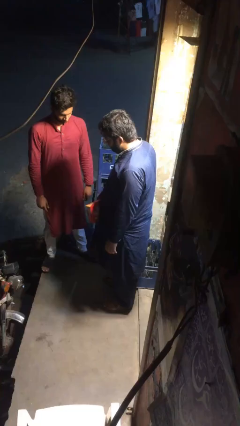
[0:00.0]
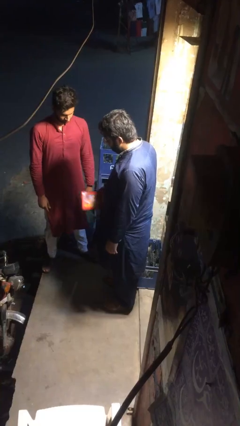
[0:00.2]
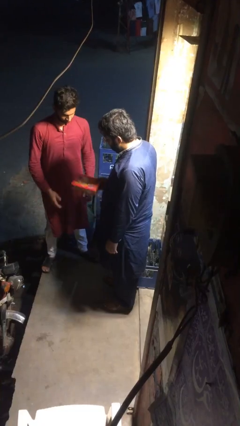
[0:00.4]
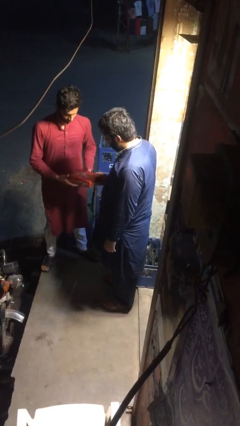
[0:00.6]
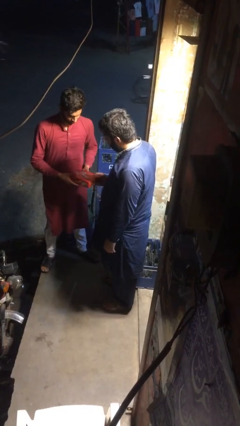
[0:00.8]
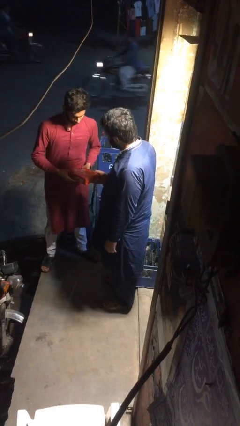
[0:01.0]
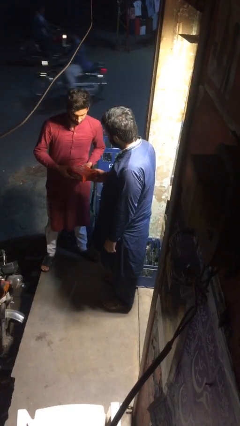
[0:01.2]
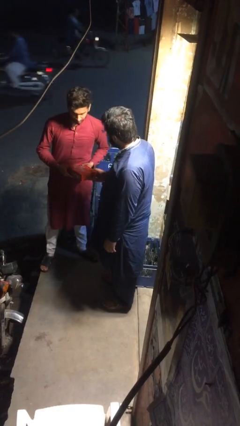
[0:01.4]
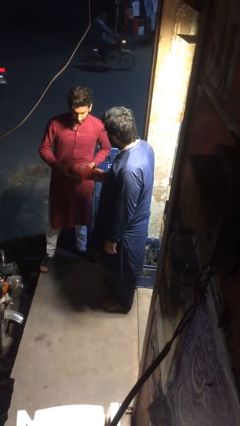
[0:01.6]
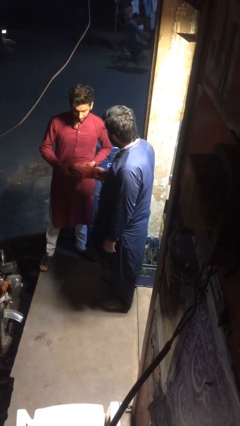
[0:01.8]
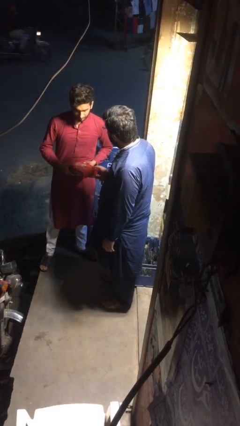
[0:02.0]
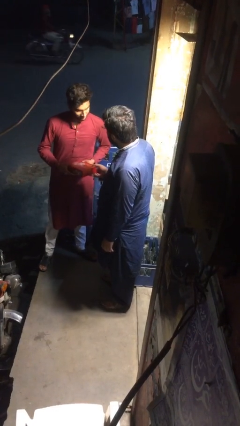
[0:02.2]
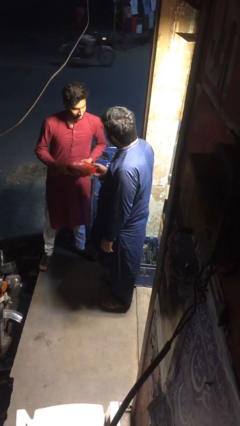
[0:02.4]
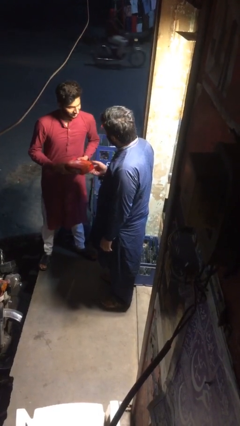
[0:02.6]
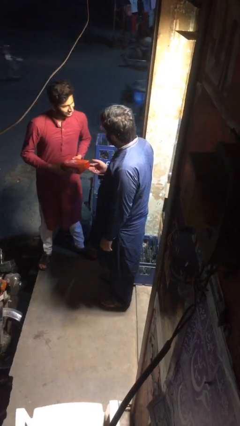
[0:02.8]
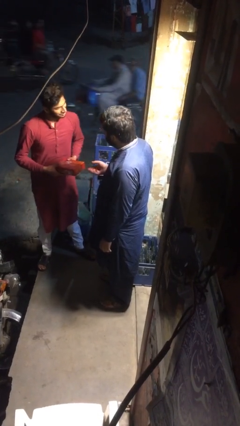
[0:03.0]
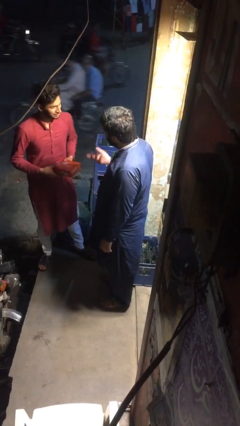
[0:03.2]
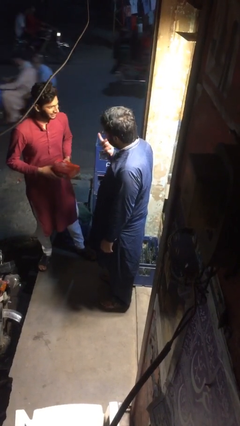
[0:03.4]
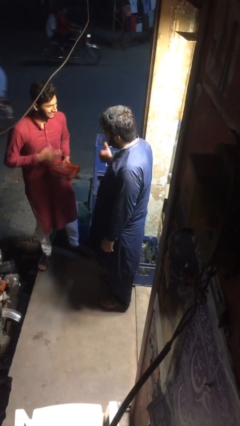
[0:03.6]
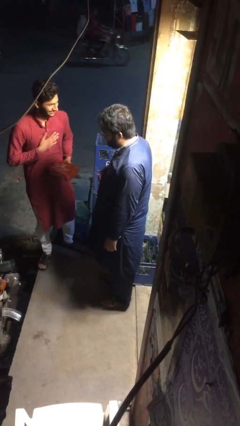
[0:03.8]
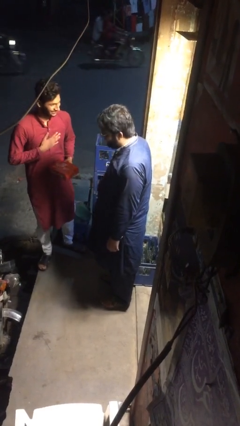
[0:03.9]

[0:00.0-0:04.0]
person transfers object to person

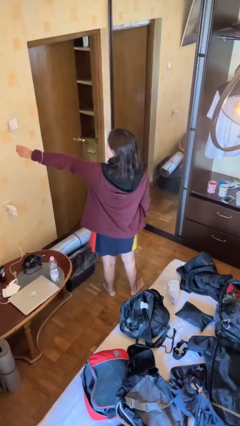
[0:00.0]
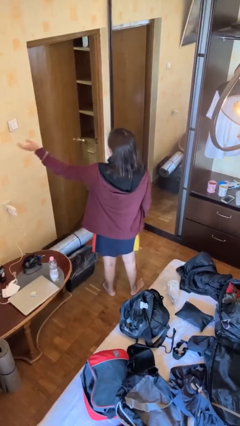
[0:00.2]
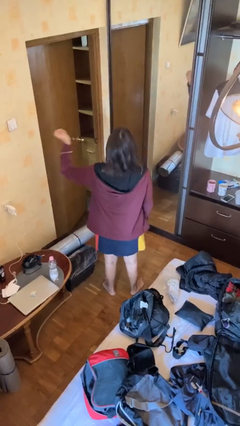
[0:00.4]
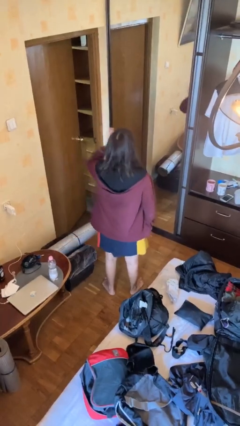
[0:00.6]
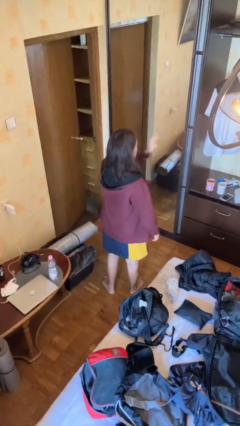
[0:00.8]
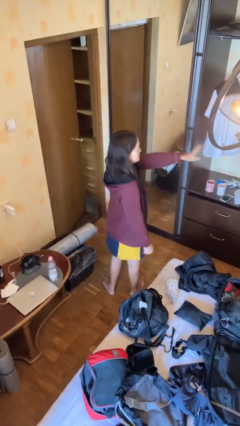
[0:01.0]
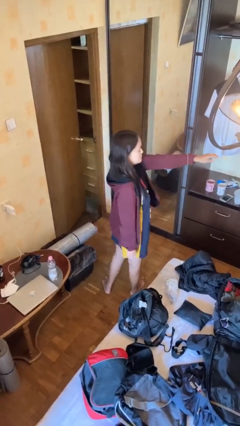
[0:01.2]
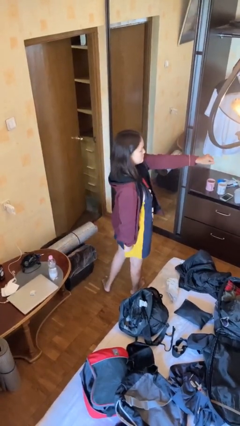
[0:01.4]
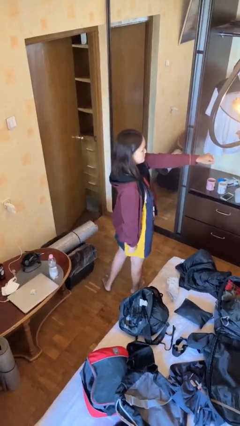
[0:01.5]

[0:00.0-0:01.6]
person gestures swipe right

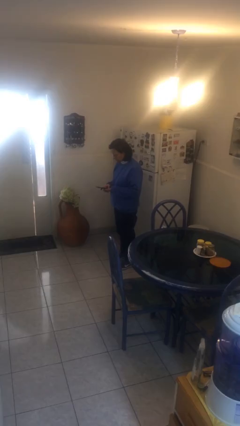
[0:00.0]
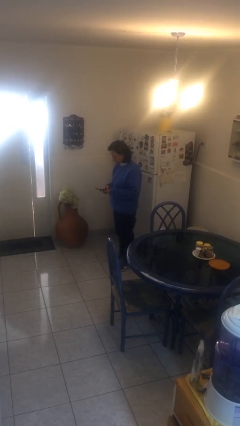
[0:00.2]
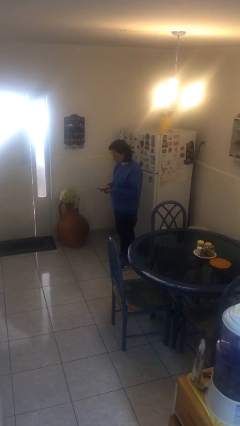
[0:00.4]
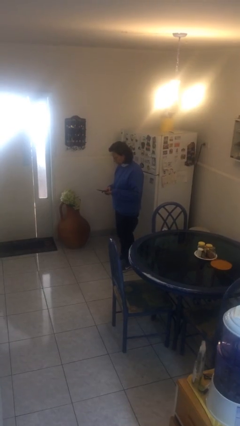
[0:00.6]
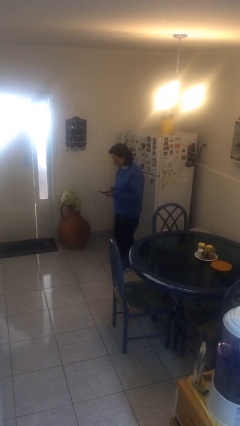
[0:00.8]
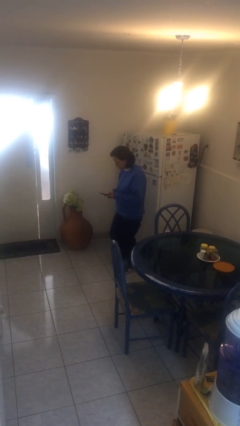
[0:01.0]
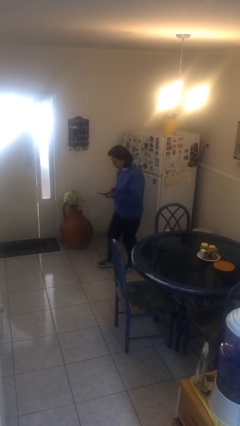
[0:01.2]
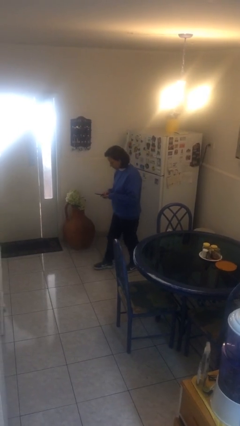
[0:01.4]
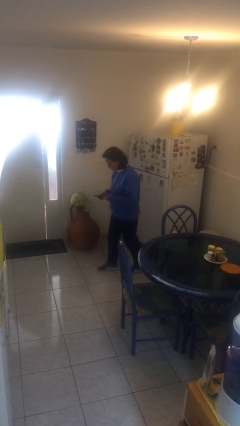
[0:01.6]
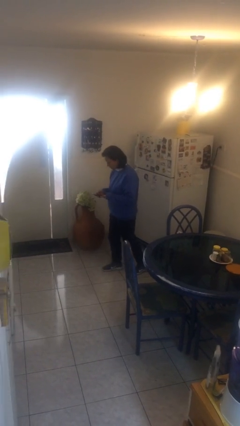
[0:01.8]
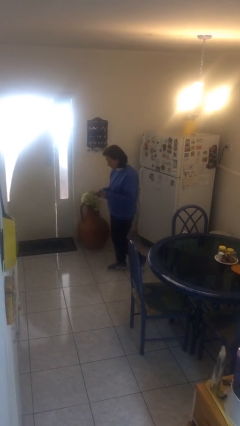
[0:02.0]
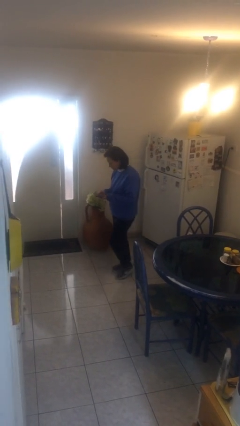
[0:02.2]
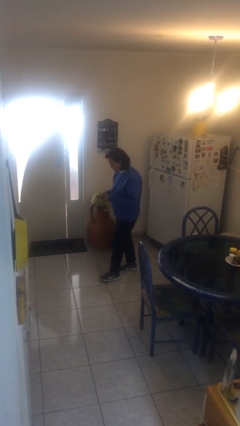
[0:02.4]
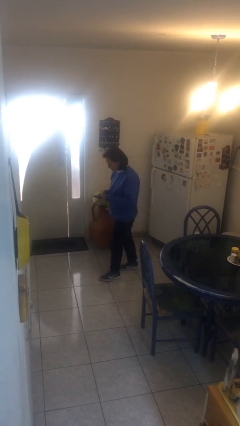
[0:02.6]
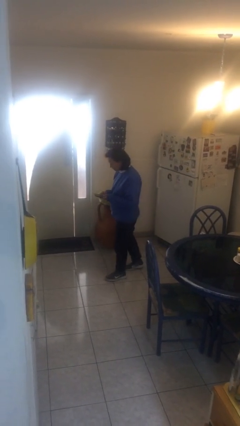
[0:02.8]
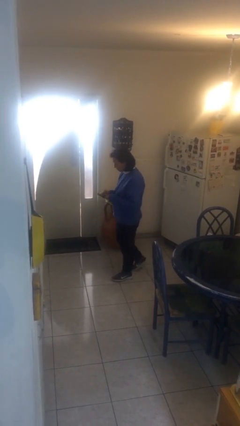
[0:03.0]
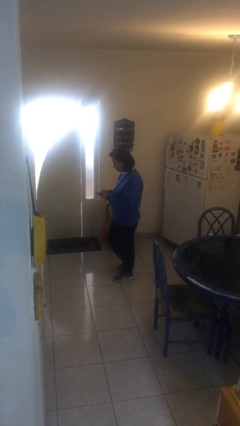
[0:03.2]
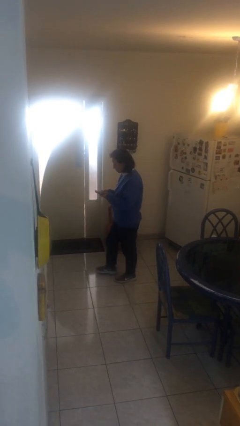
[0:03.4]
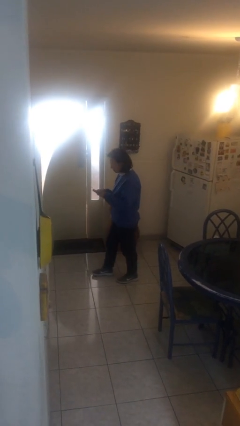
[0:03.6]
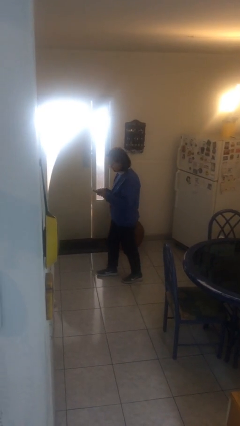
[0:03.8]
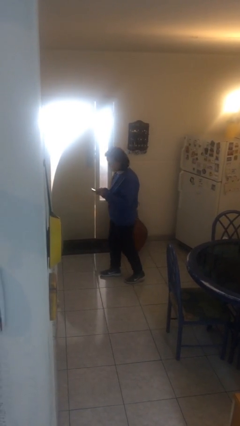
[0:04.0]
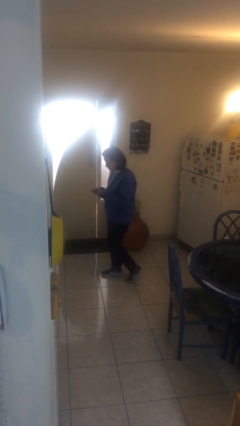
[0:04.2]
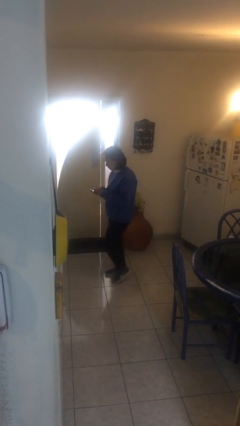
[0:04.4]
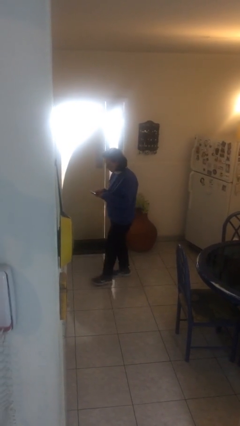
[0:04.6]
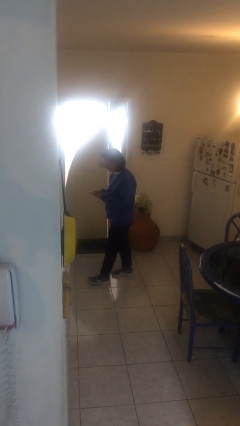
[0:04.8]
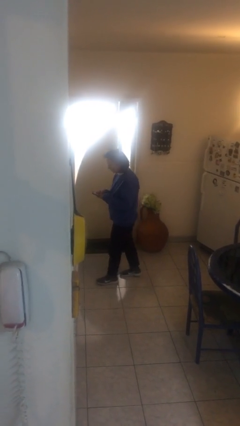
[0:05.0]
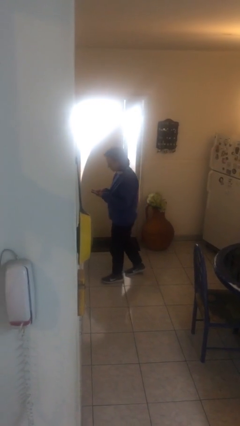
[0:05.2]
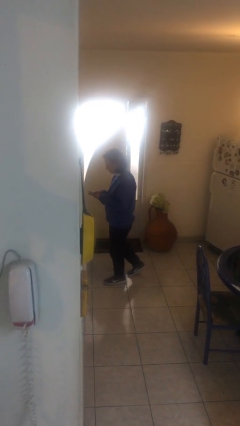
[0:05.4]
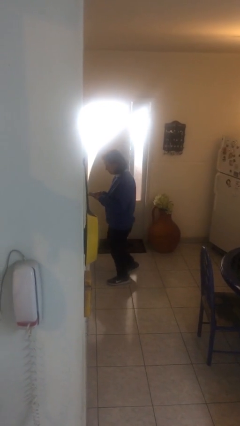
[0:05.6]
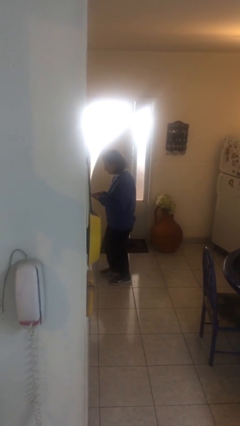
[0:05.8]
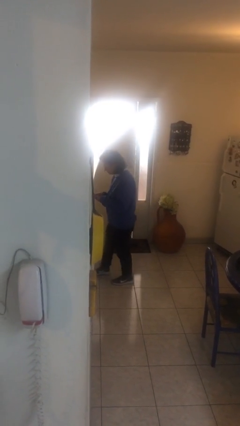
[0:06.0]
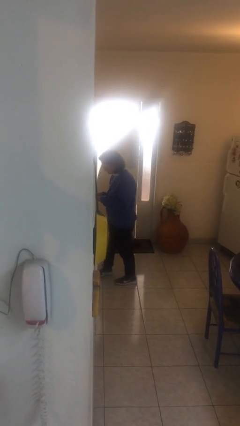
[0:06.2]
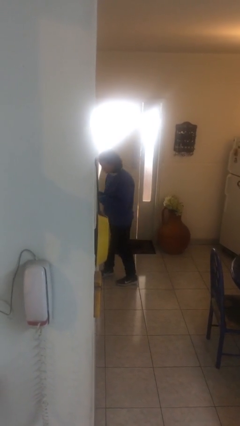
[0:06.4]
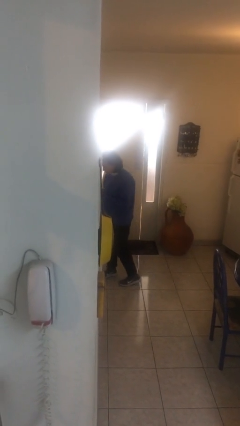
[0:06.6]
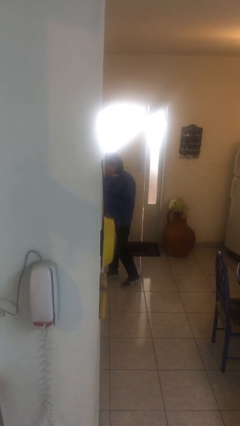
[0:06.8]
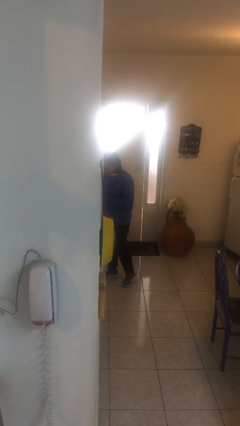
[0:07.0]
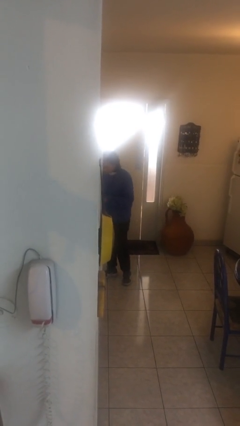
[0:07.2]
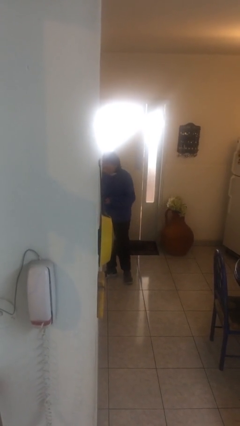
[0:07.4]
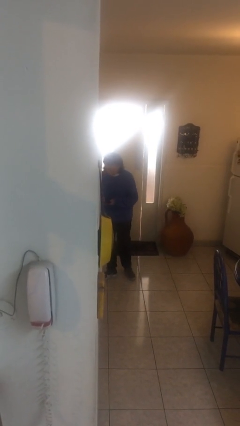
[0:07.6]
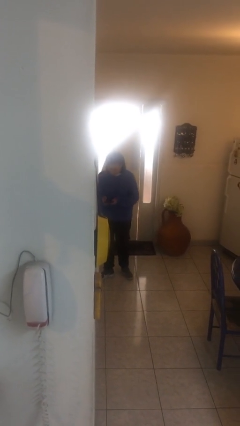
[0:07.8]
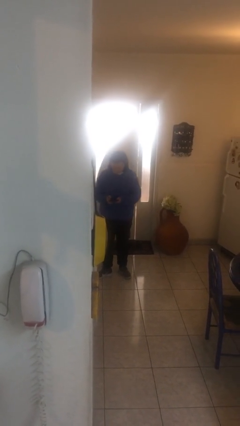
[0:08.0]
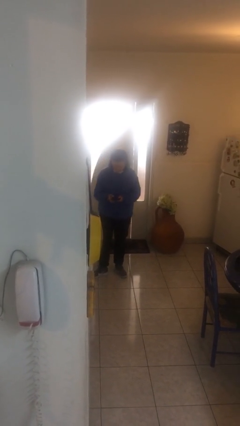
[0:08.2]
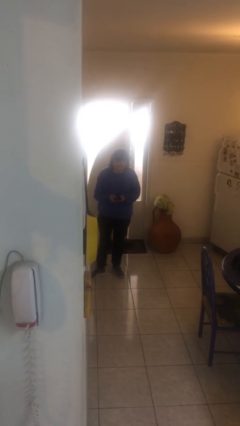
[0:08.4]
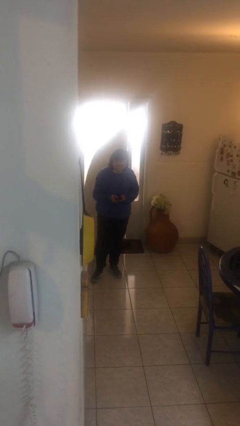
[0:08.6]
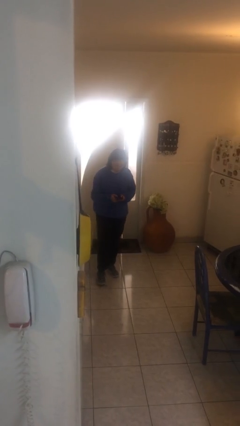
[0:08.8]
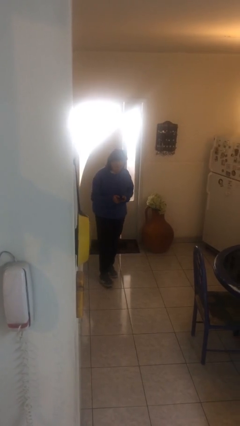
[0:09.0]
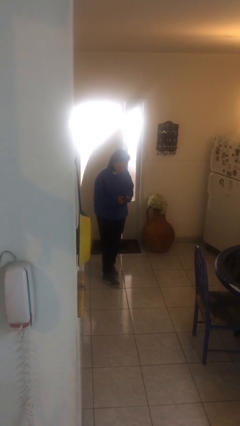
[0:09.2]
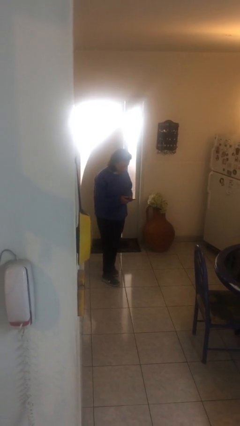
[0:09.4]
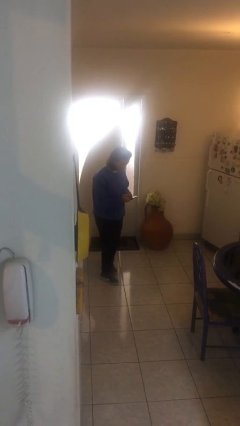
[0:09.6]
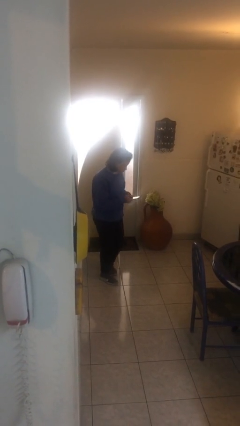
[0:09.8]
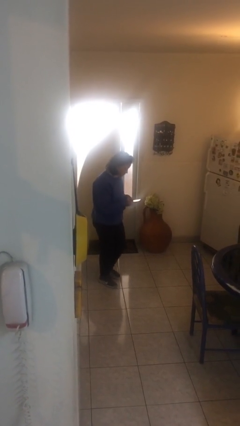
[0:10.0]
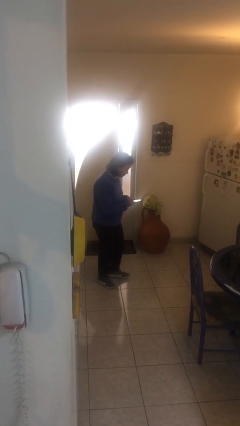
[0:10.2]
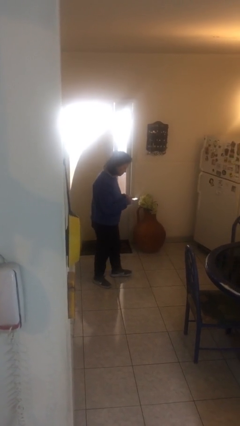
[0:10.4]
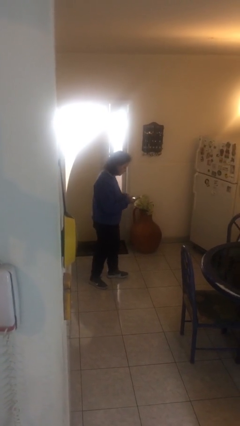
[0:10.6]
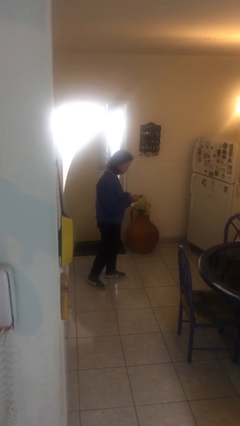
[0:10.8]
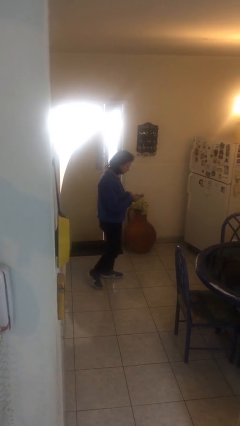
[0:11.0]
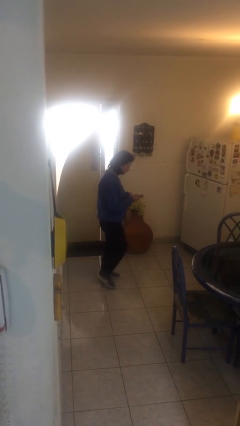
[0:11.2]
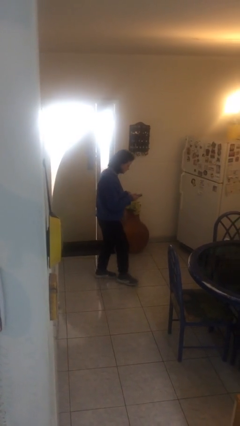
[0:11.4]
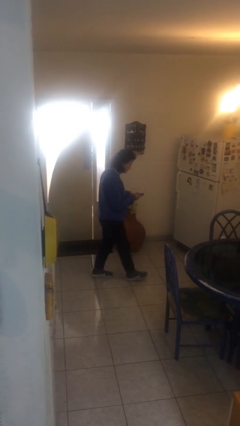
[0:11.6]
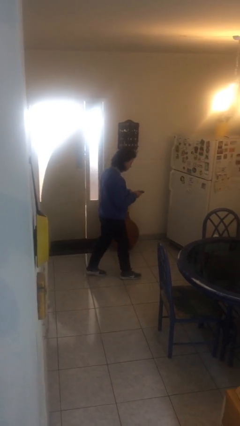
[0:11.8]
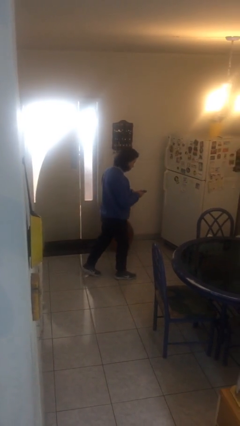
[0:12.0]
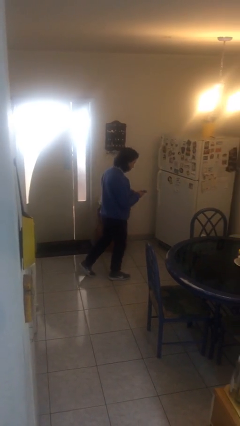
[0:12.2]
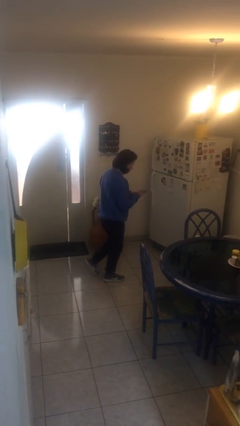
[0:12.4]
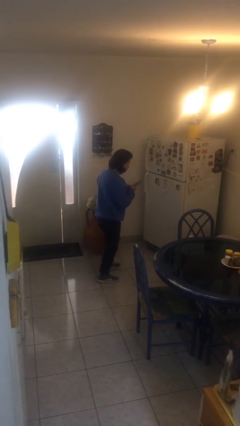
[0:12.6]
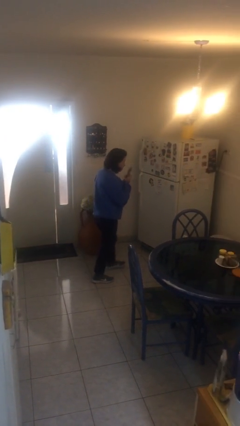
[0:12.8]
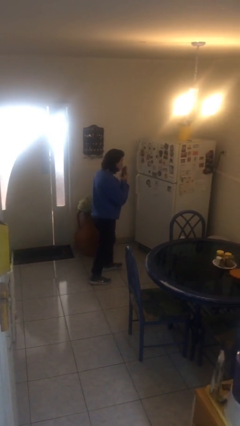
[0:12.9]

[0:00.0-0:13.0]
person texts on phone
